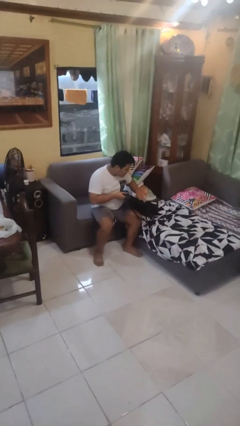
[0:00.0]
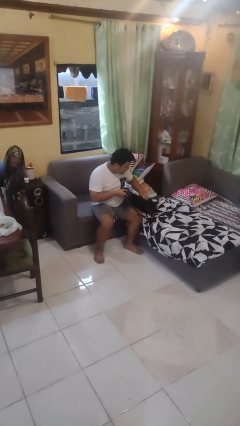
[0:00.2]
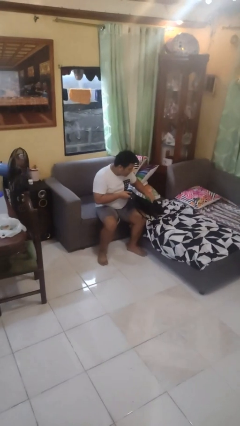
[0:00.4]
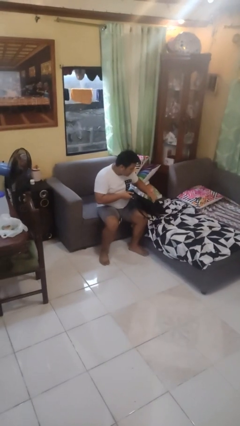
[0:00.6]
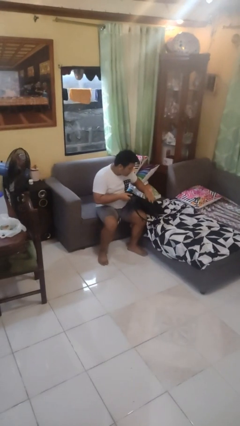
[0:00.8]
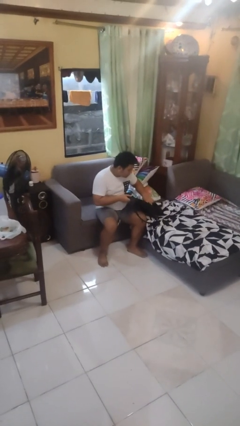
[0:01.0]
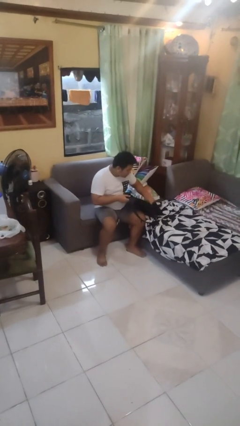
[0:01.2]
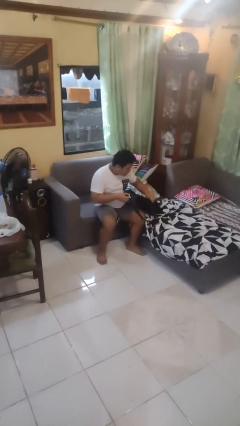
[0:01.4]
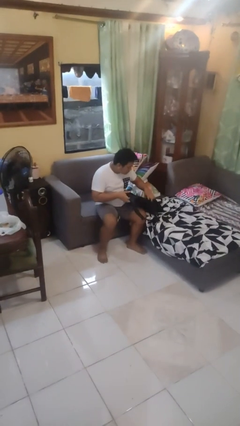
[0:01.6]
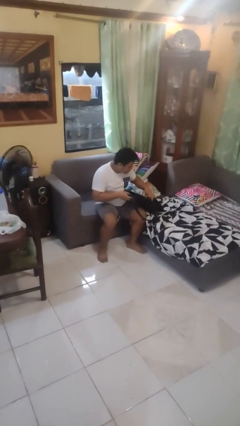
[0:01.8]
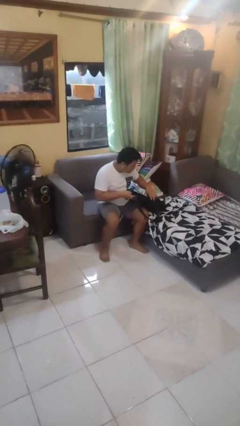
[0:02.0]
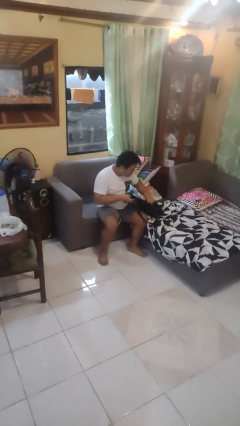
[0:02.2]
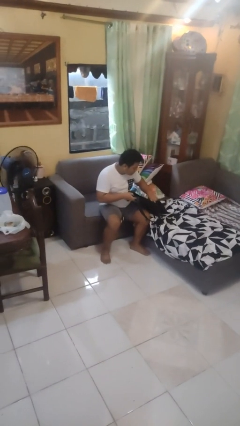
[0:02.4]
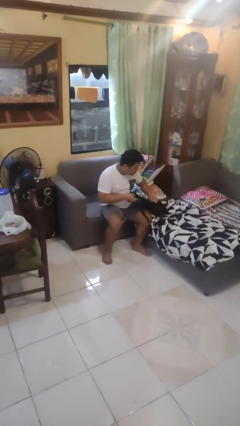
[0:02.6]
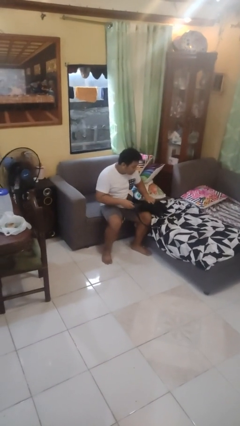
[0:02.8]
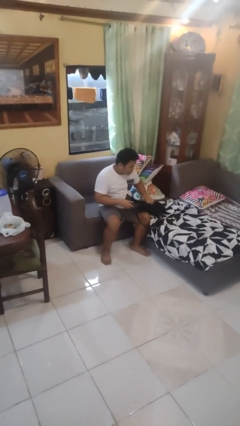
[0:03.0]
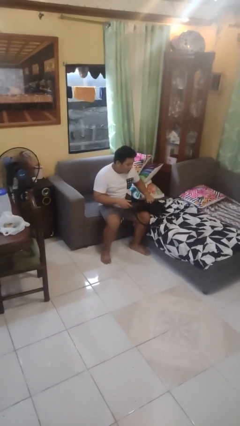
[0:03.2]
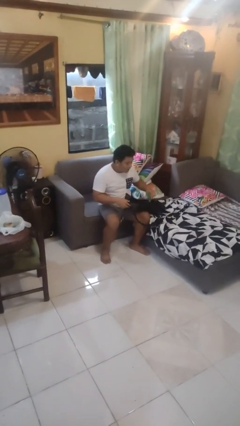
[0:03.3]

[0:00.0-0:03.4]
person searches in backpack

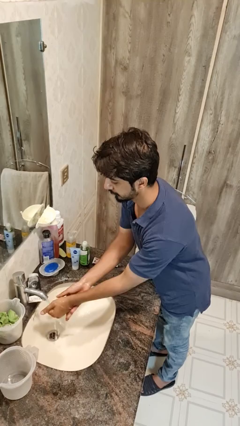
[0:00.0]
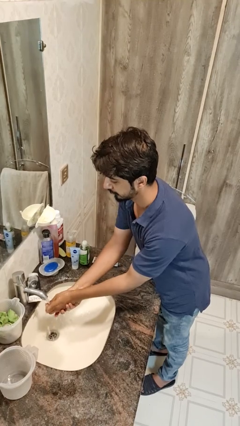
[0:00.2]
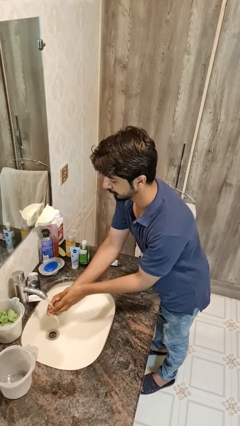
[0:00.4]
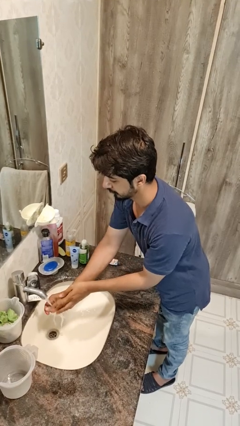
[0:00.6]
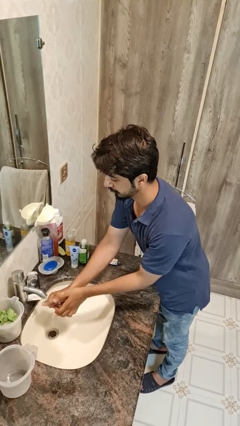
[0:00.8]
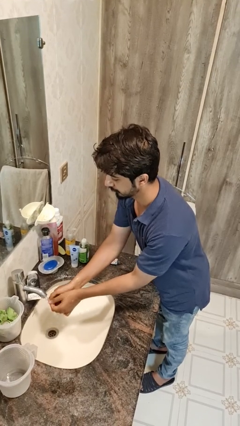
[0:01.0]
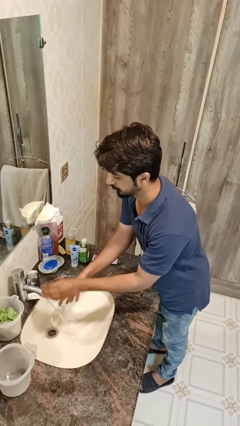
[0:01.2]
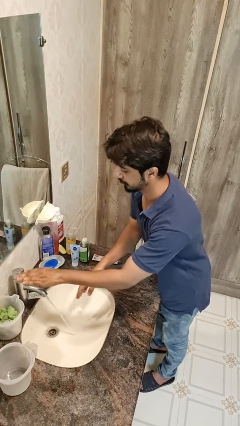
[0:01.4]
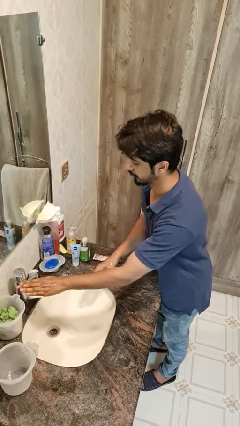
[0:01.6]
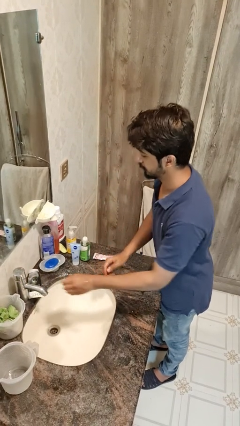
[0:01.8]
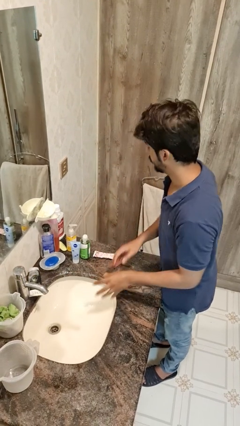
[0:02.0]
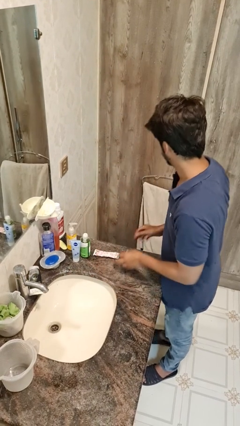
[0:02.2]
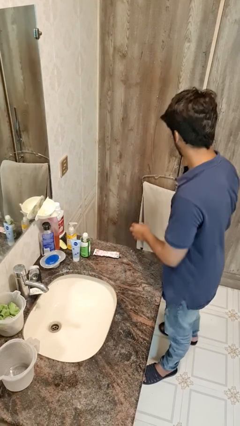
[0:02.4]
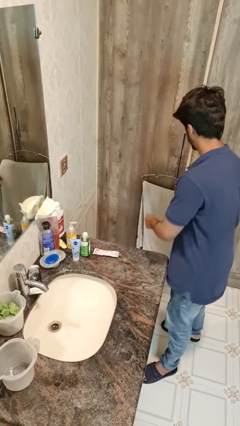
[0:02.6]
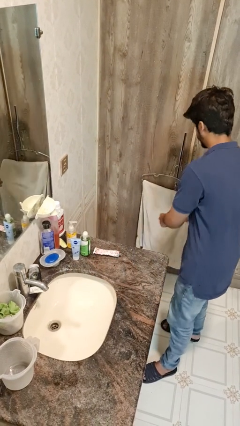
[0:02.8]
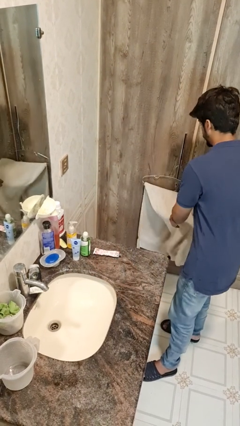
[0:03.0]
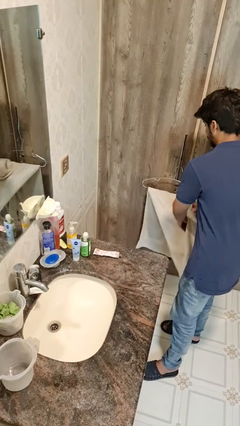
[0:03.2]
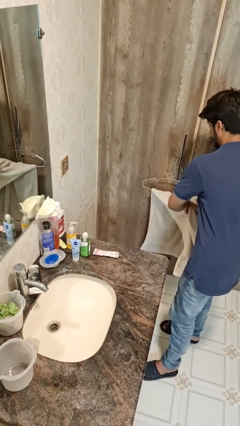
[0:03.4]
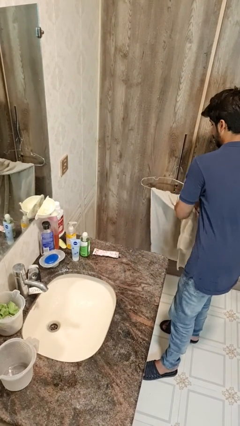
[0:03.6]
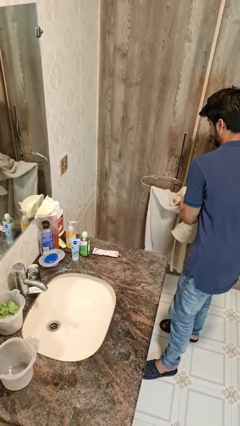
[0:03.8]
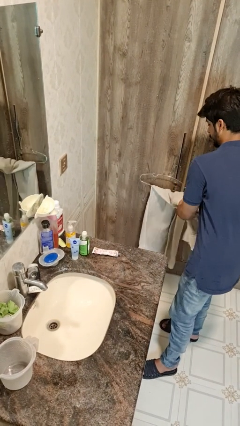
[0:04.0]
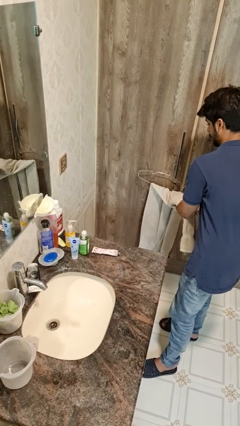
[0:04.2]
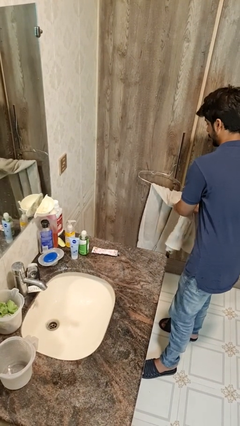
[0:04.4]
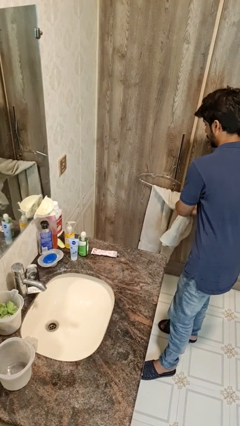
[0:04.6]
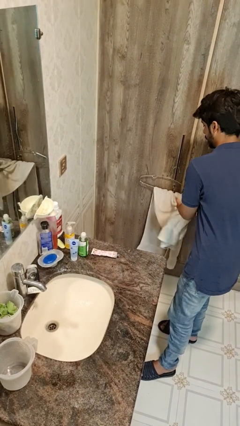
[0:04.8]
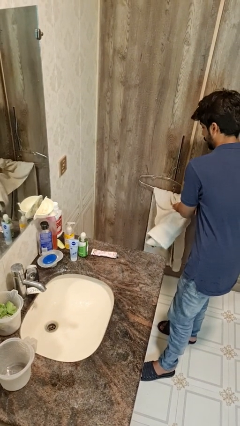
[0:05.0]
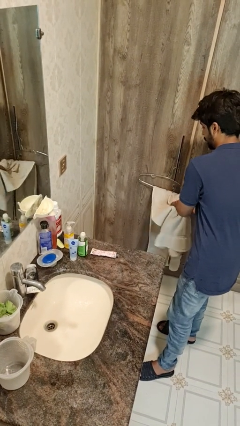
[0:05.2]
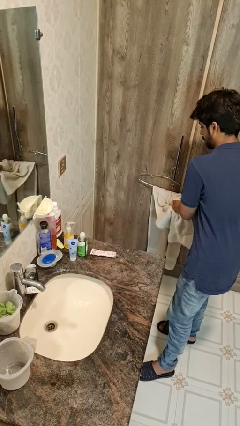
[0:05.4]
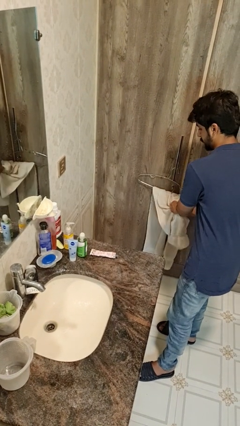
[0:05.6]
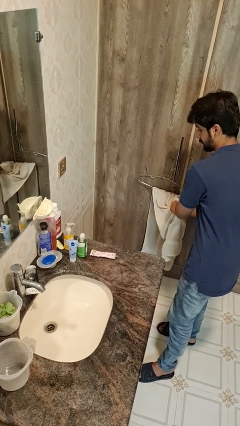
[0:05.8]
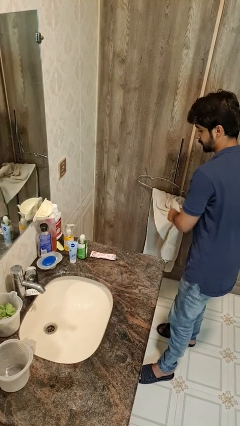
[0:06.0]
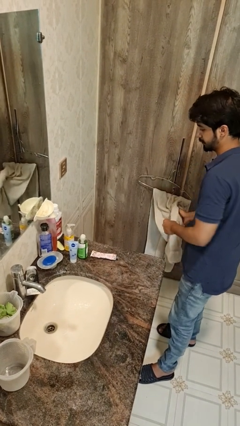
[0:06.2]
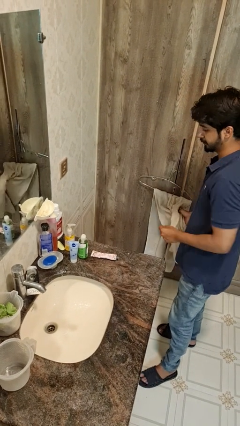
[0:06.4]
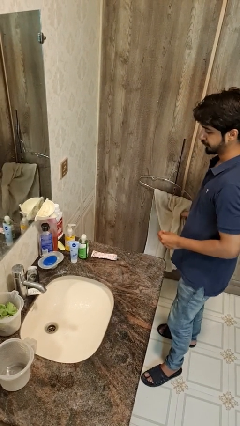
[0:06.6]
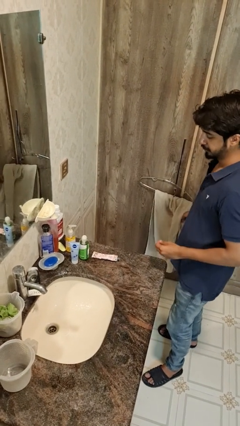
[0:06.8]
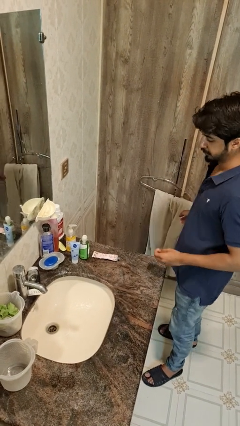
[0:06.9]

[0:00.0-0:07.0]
person dries hands with towel

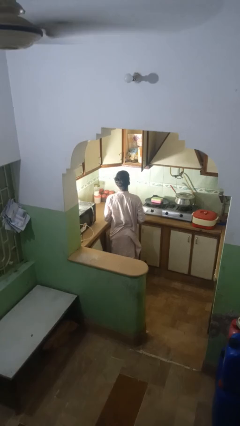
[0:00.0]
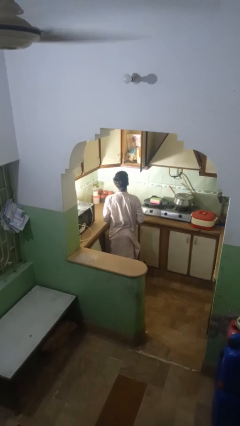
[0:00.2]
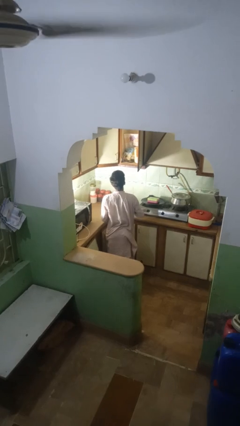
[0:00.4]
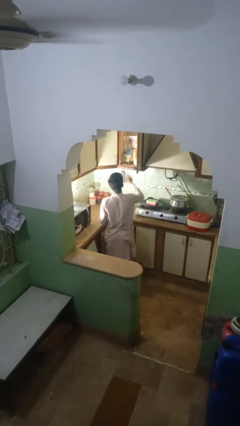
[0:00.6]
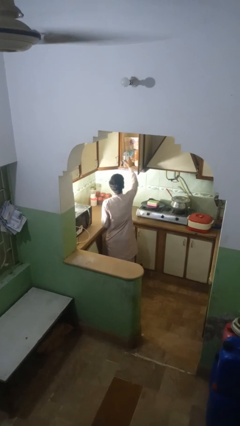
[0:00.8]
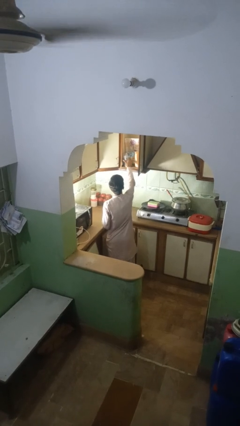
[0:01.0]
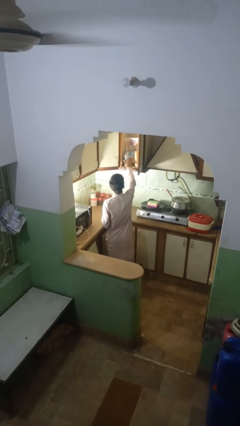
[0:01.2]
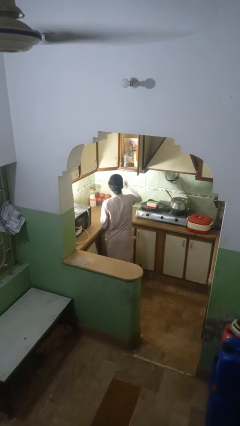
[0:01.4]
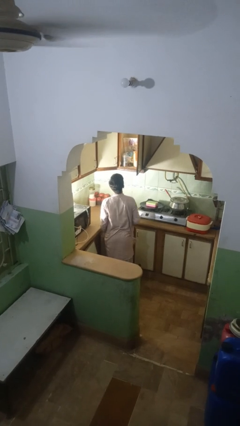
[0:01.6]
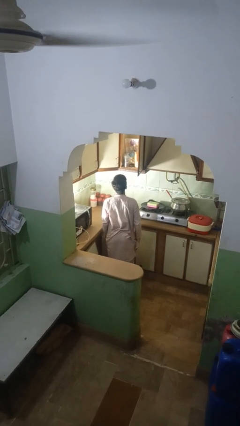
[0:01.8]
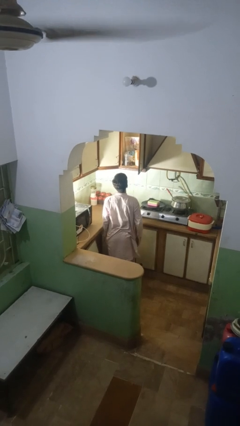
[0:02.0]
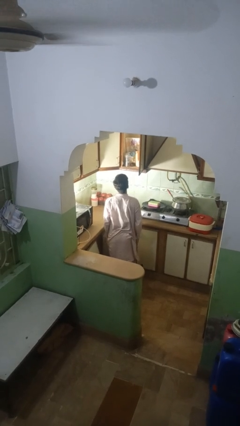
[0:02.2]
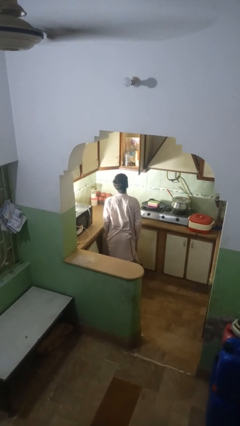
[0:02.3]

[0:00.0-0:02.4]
person puts object into kitchen drawer

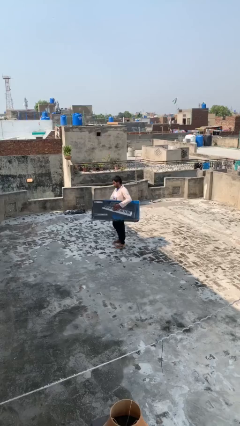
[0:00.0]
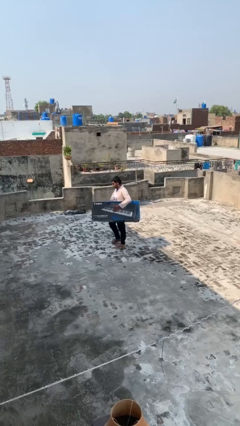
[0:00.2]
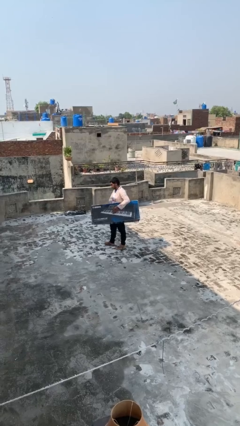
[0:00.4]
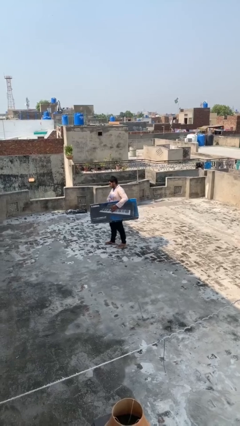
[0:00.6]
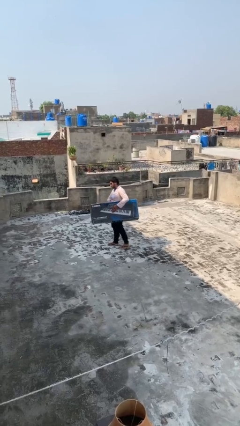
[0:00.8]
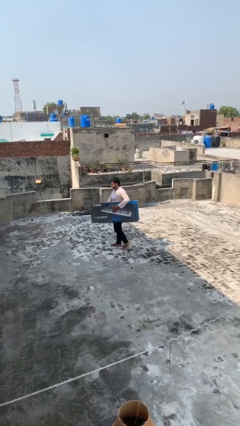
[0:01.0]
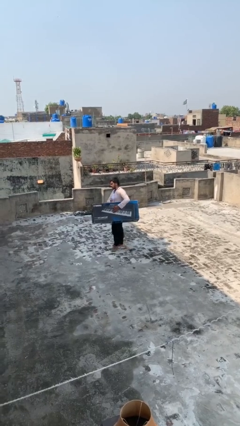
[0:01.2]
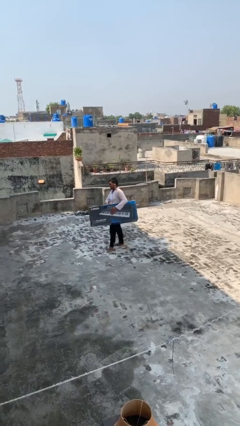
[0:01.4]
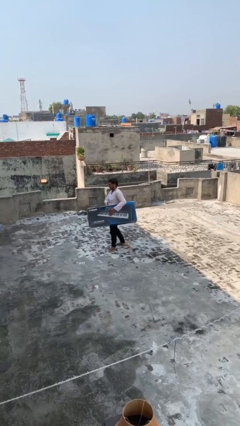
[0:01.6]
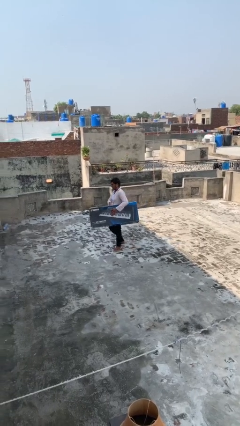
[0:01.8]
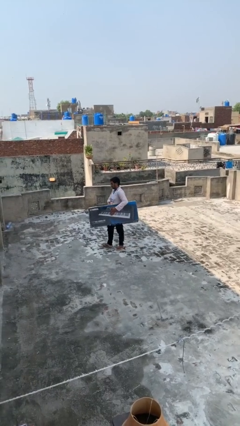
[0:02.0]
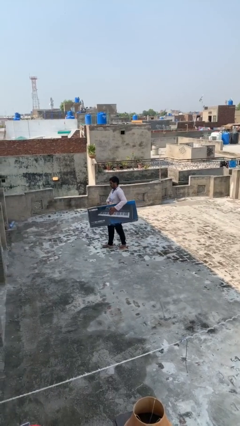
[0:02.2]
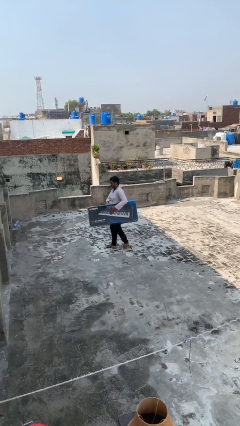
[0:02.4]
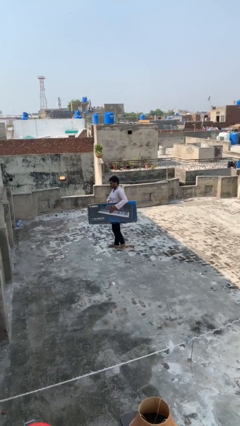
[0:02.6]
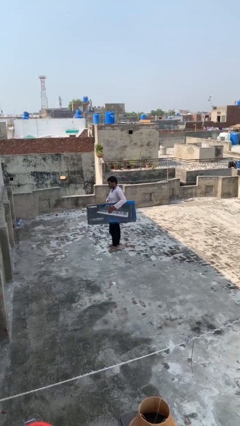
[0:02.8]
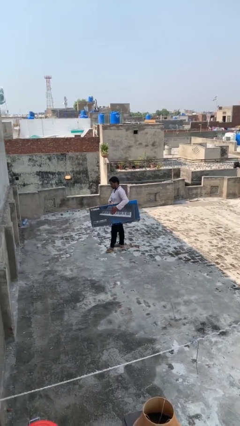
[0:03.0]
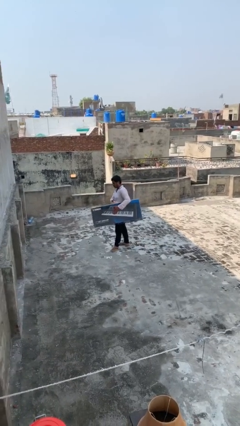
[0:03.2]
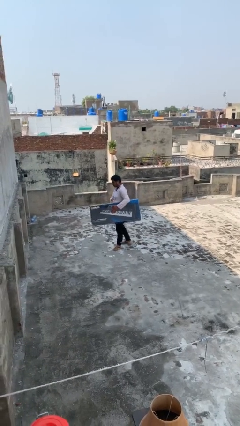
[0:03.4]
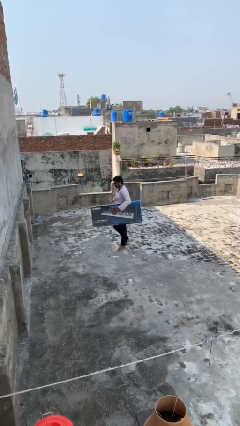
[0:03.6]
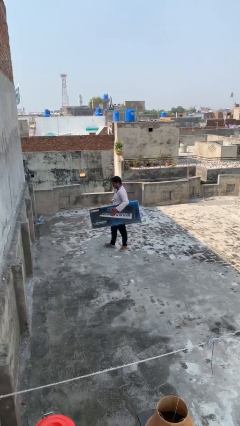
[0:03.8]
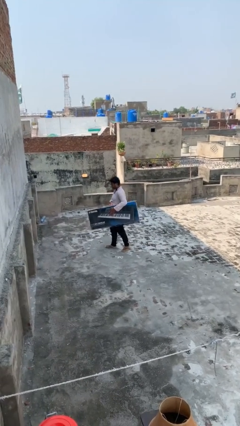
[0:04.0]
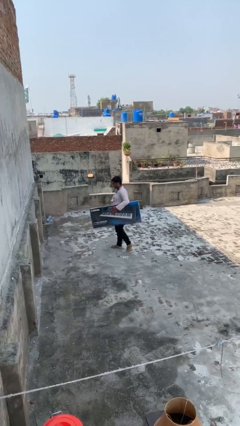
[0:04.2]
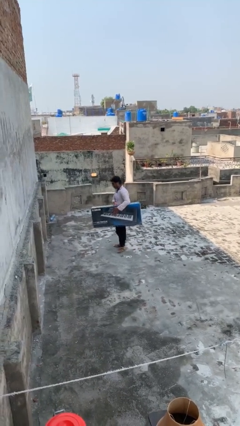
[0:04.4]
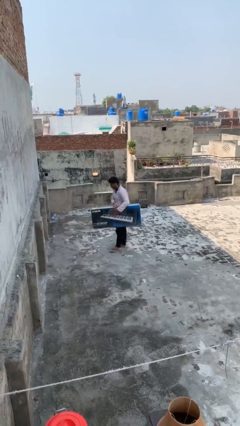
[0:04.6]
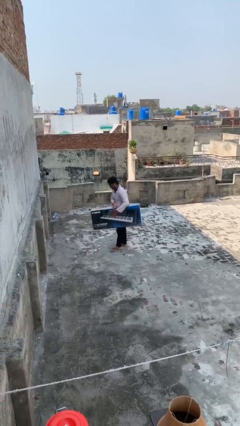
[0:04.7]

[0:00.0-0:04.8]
person carries heavy object

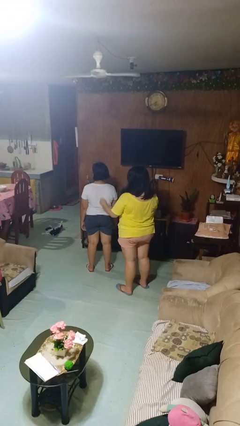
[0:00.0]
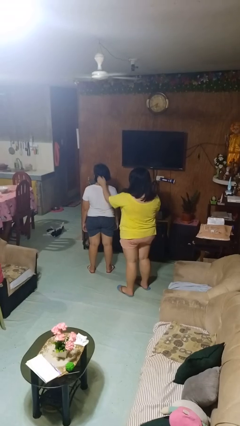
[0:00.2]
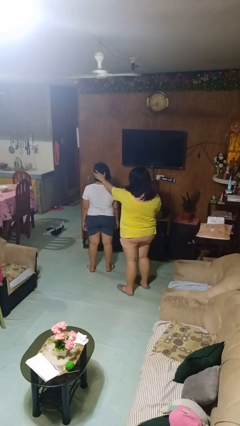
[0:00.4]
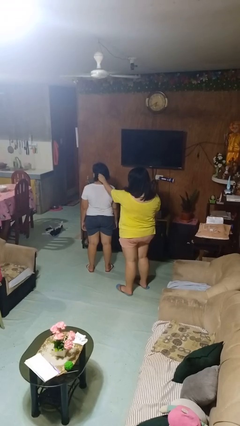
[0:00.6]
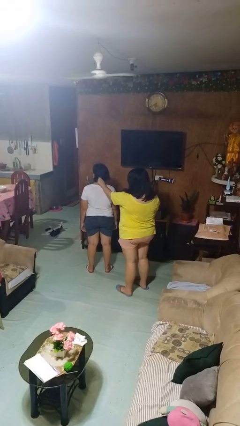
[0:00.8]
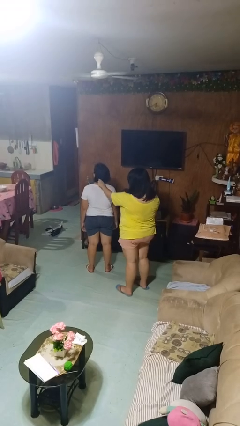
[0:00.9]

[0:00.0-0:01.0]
person grabs person by hair
